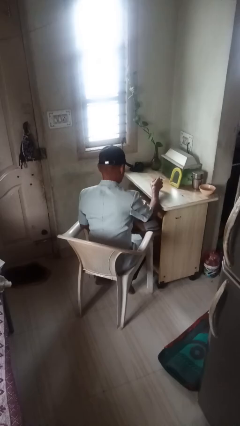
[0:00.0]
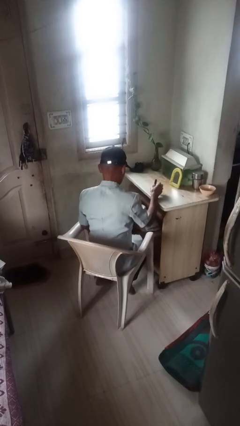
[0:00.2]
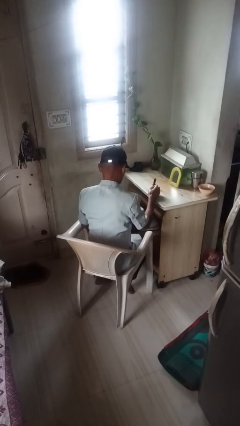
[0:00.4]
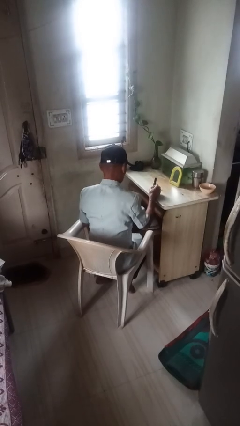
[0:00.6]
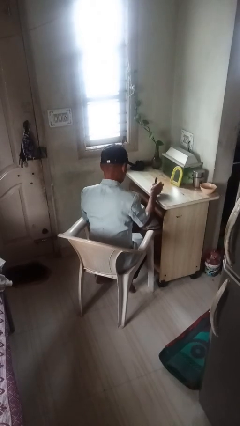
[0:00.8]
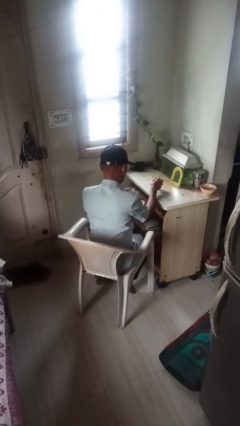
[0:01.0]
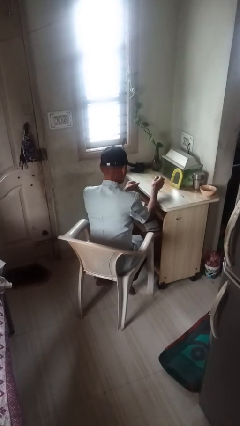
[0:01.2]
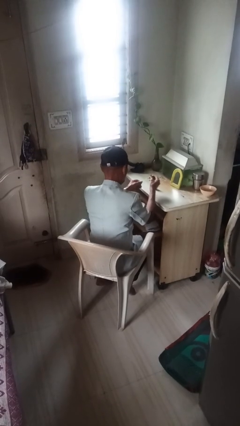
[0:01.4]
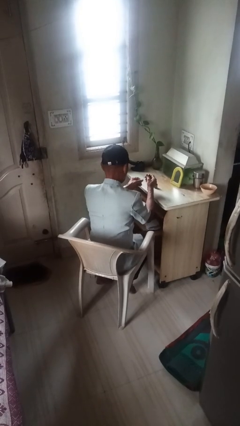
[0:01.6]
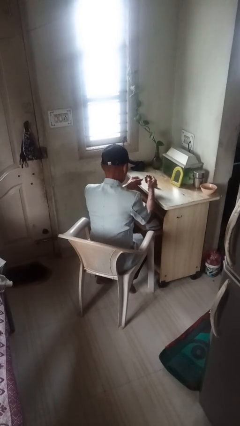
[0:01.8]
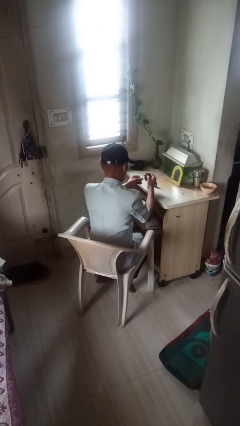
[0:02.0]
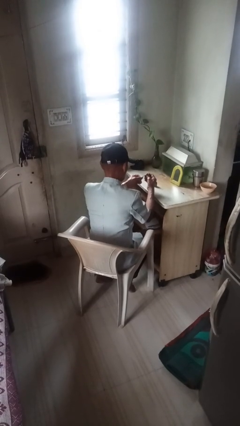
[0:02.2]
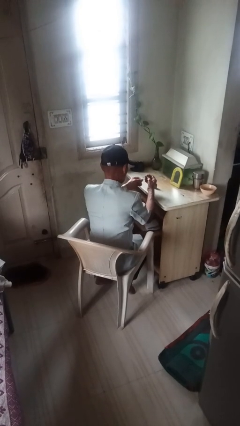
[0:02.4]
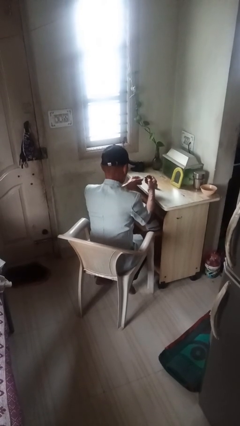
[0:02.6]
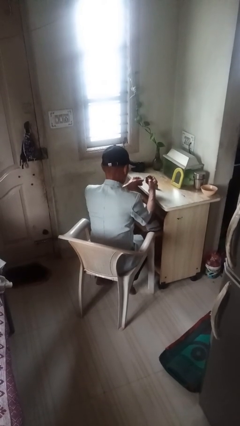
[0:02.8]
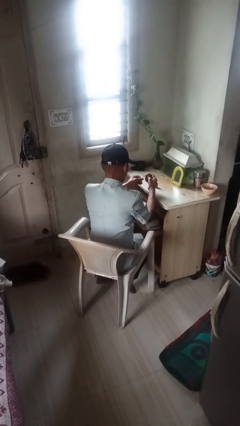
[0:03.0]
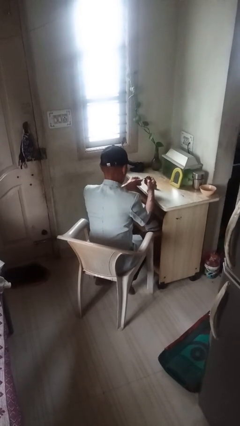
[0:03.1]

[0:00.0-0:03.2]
person paints fingernails

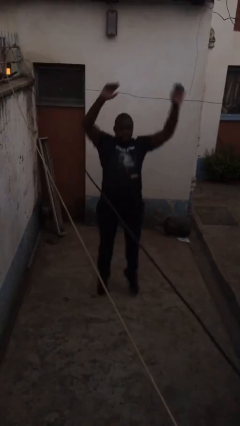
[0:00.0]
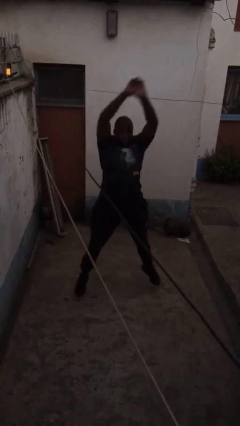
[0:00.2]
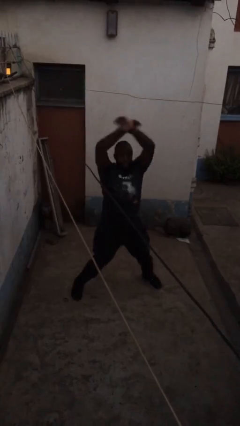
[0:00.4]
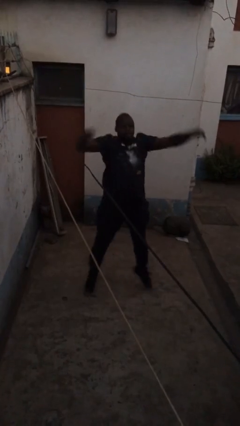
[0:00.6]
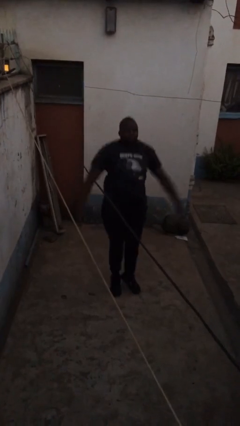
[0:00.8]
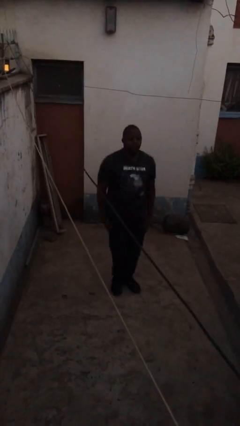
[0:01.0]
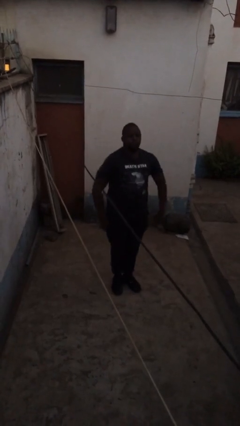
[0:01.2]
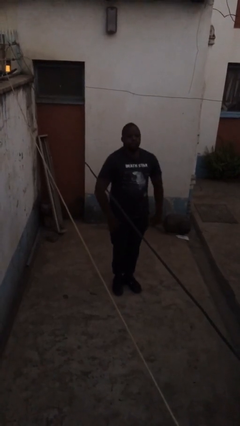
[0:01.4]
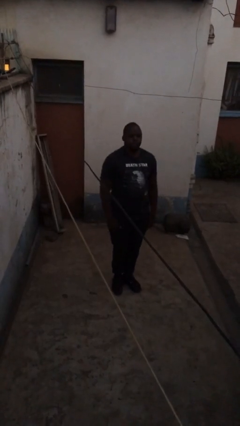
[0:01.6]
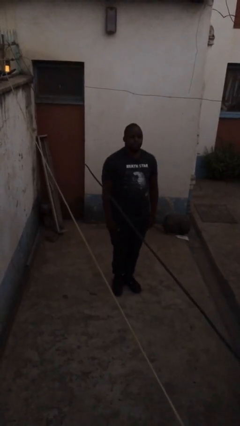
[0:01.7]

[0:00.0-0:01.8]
person exercises with jumping jacks

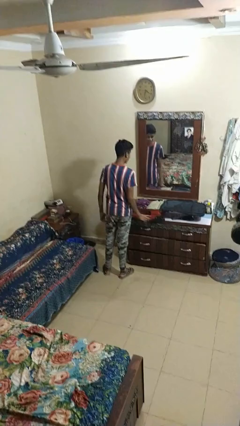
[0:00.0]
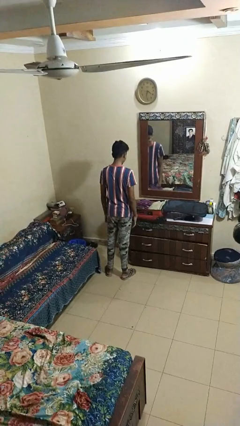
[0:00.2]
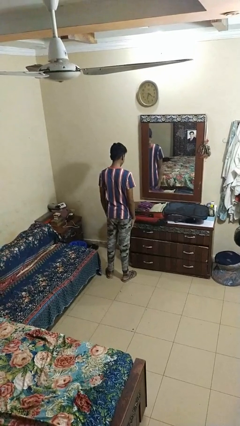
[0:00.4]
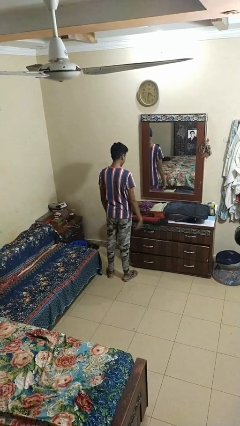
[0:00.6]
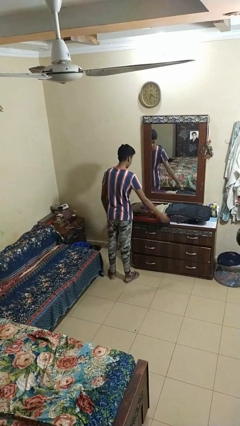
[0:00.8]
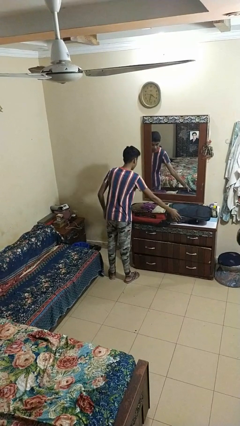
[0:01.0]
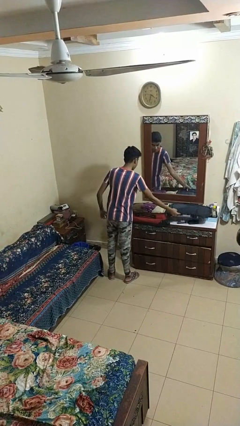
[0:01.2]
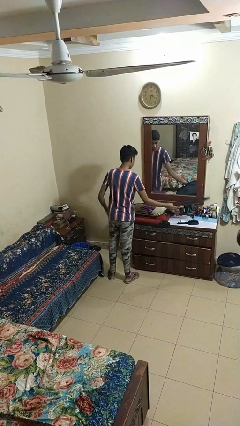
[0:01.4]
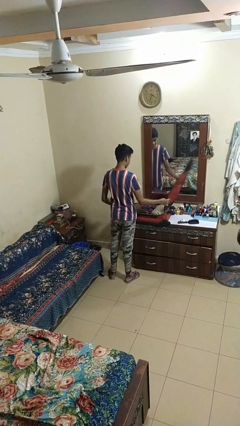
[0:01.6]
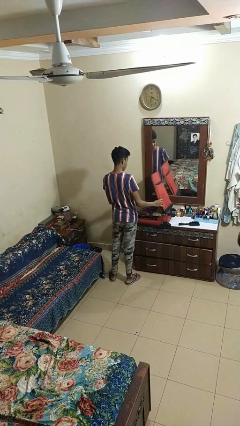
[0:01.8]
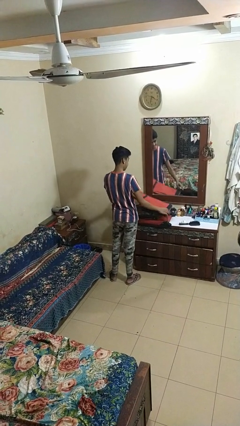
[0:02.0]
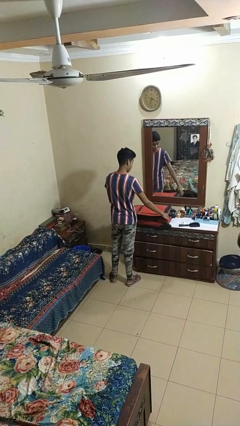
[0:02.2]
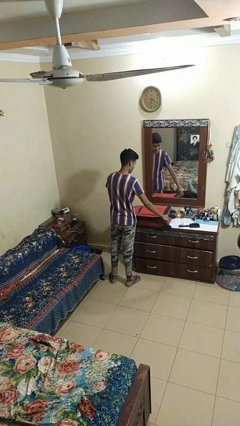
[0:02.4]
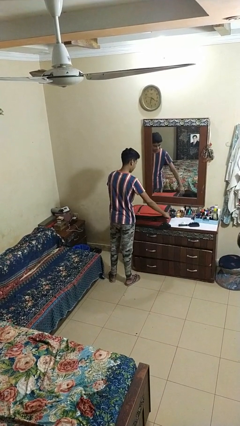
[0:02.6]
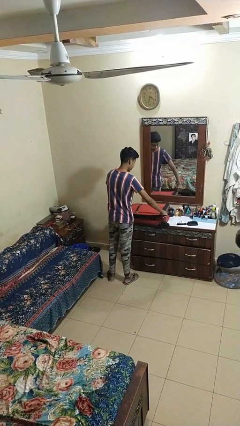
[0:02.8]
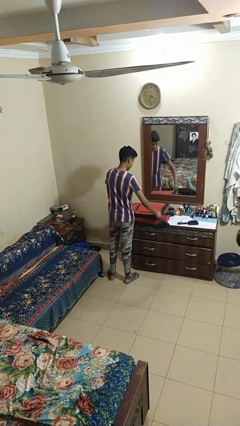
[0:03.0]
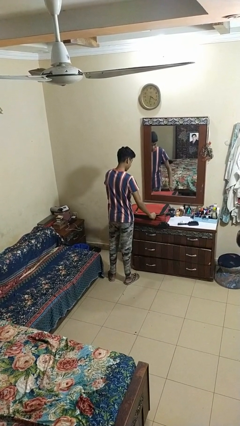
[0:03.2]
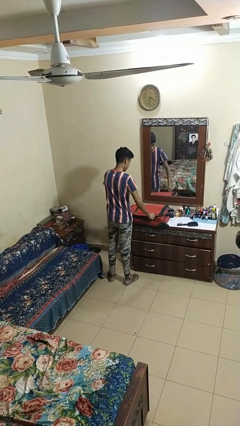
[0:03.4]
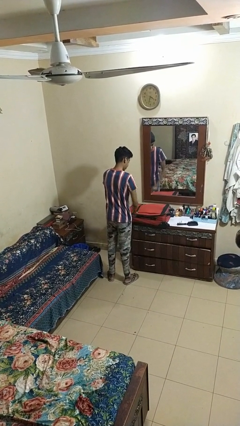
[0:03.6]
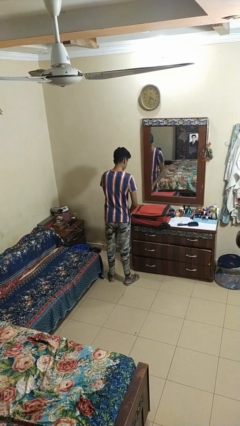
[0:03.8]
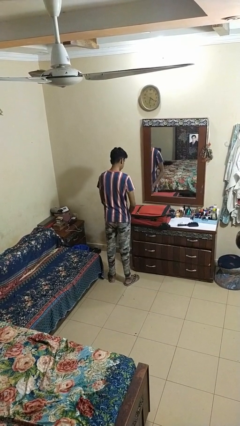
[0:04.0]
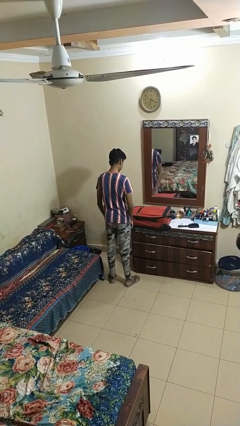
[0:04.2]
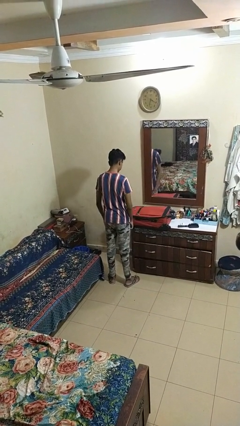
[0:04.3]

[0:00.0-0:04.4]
person closes suitcase

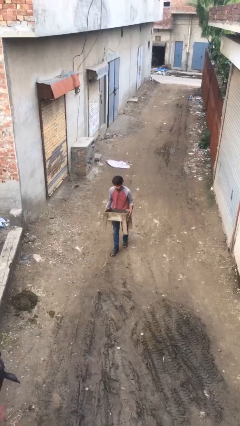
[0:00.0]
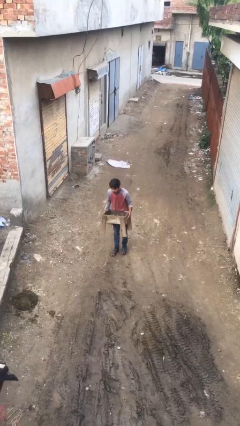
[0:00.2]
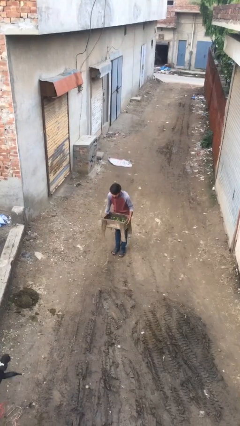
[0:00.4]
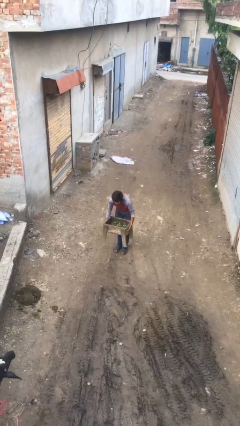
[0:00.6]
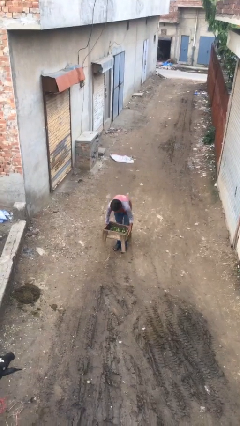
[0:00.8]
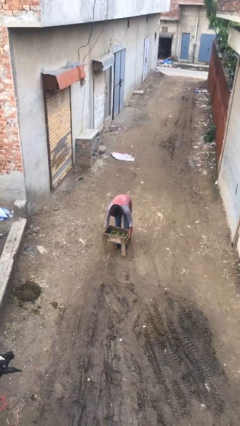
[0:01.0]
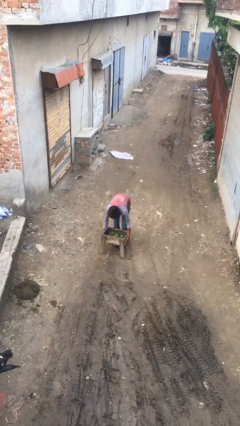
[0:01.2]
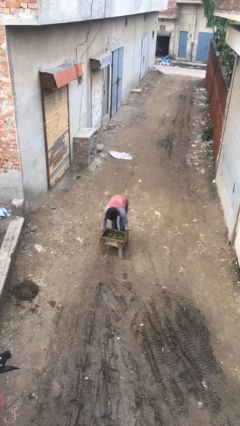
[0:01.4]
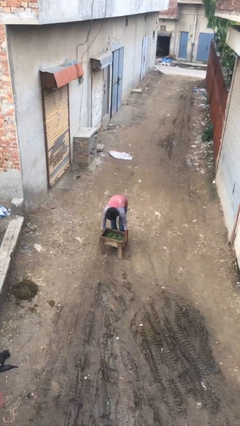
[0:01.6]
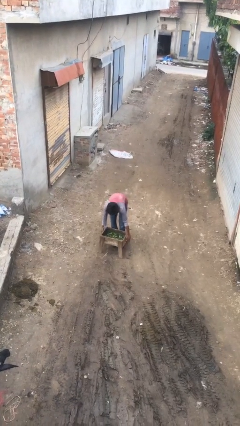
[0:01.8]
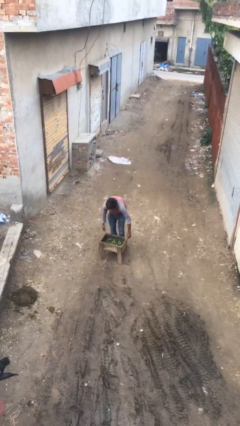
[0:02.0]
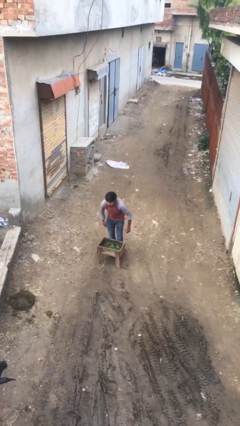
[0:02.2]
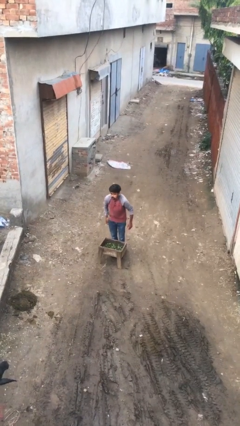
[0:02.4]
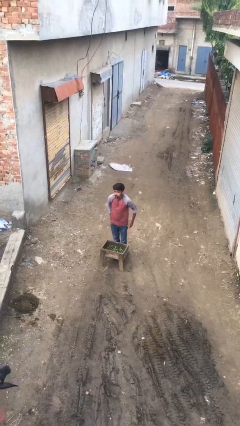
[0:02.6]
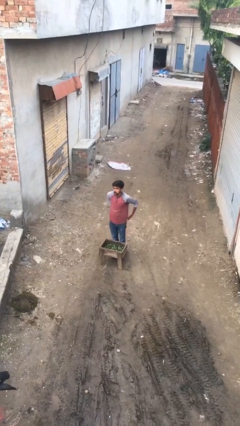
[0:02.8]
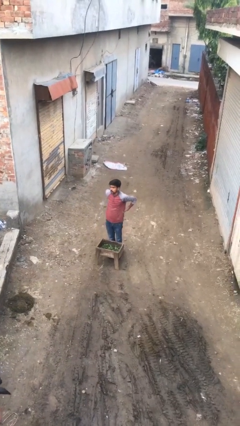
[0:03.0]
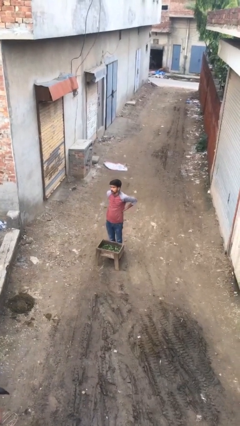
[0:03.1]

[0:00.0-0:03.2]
person puts down object on floor

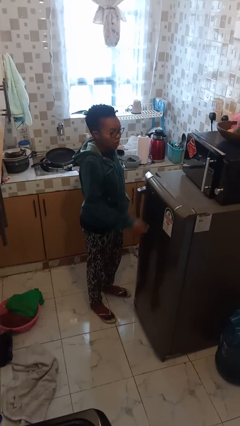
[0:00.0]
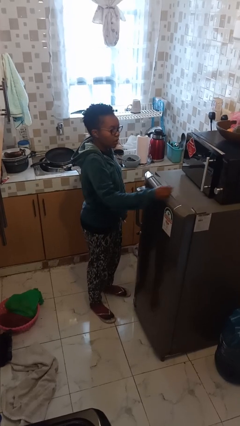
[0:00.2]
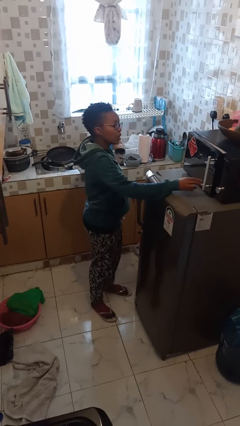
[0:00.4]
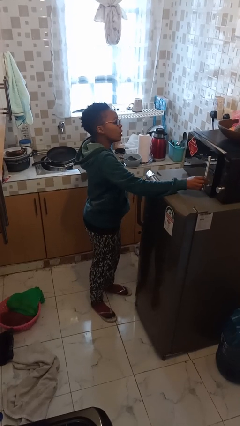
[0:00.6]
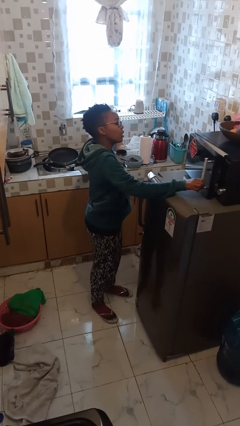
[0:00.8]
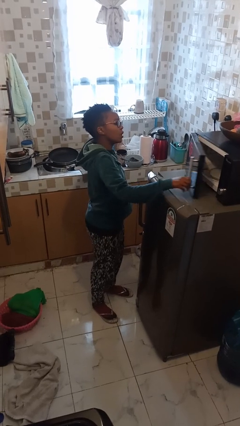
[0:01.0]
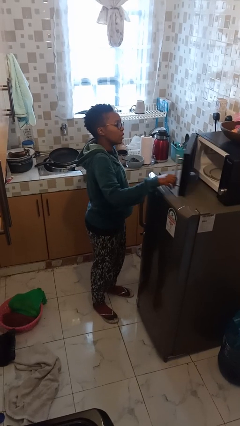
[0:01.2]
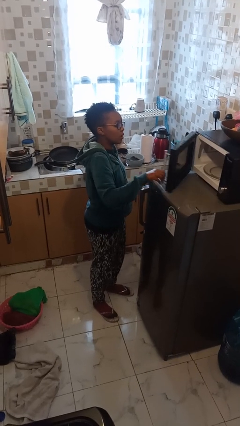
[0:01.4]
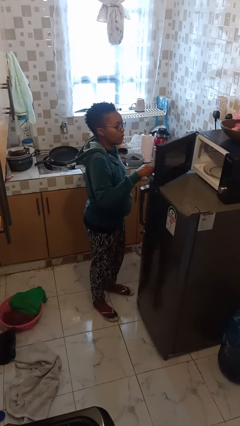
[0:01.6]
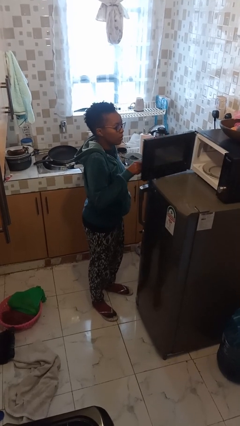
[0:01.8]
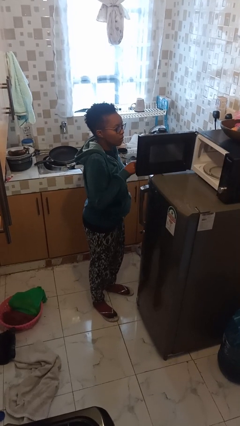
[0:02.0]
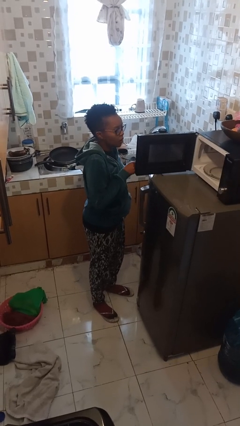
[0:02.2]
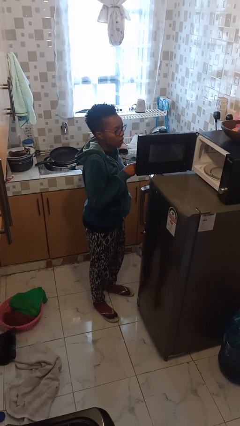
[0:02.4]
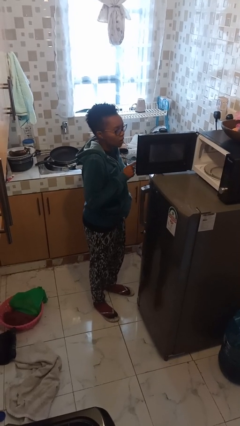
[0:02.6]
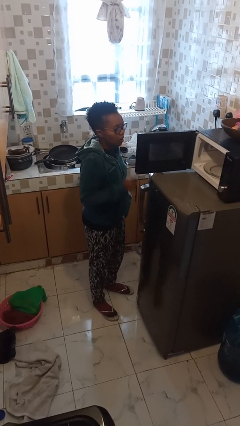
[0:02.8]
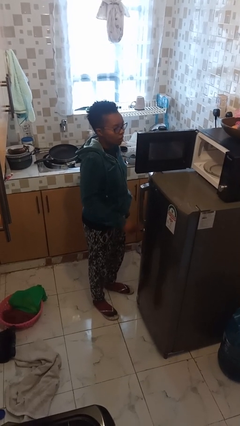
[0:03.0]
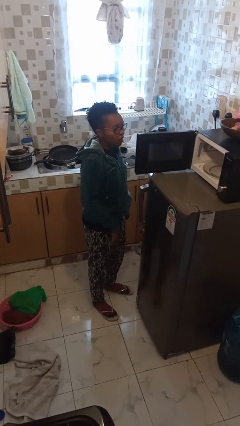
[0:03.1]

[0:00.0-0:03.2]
person opens microwave

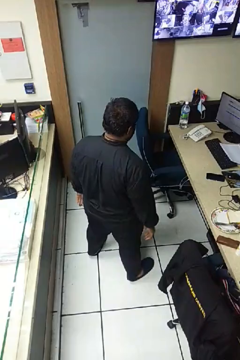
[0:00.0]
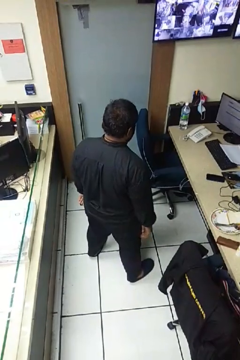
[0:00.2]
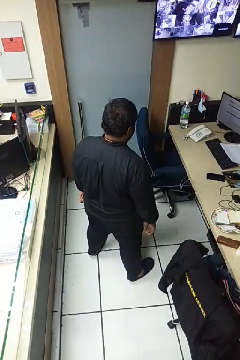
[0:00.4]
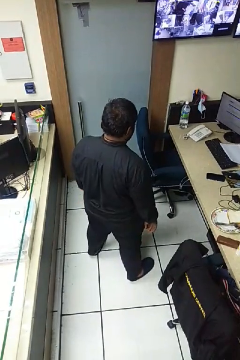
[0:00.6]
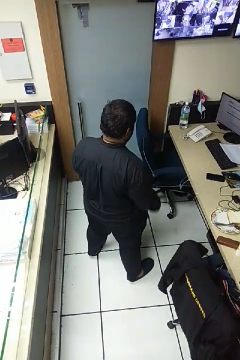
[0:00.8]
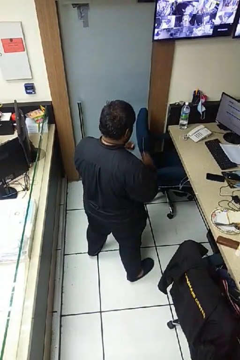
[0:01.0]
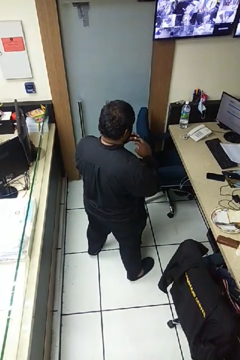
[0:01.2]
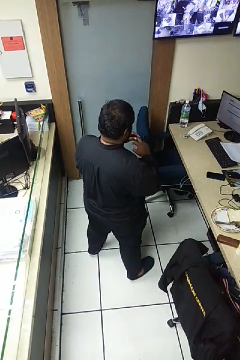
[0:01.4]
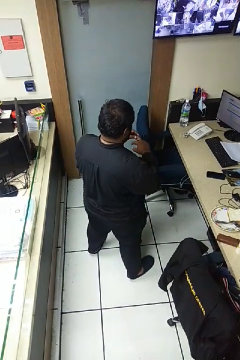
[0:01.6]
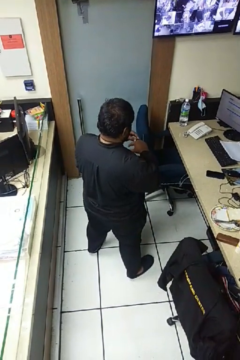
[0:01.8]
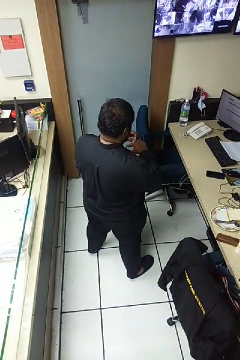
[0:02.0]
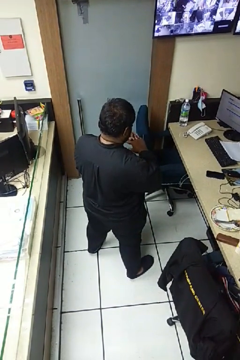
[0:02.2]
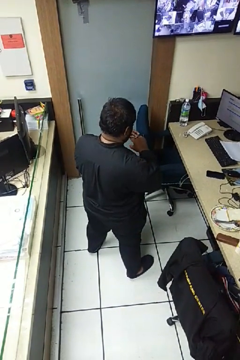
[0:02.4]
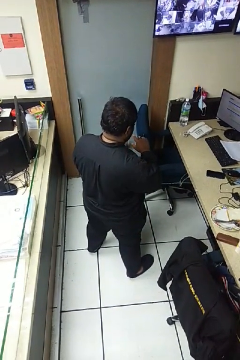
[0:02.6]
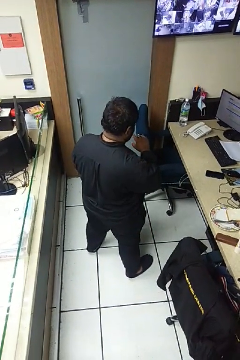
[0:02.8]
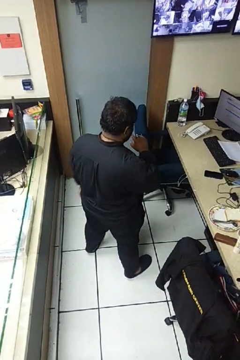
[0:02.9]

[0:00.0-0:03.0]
person puts on ring
